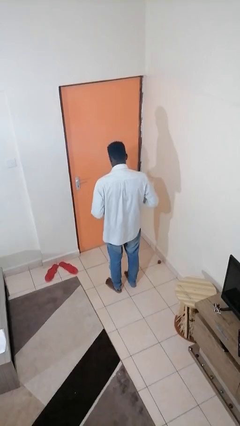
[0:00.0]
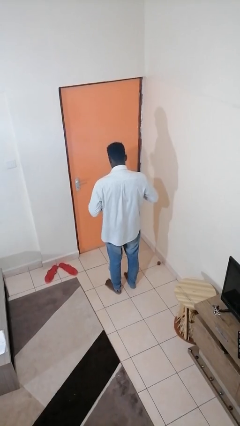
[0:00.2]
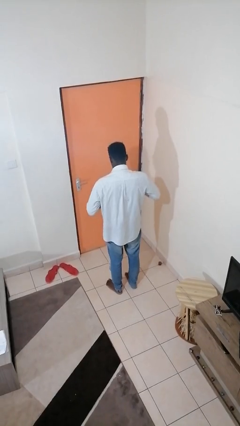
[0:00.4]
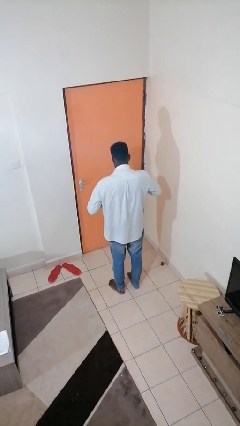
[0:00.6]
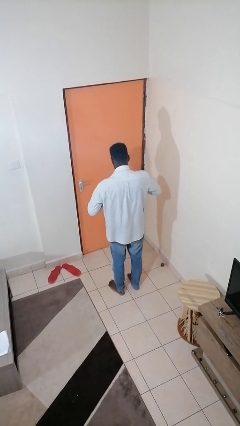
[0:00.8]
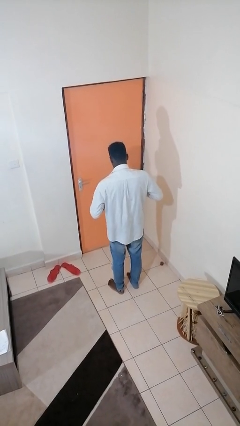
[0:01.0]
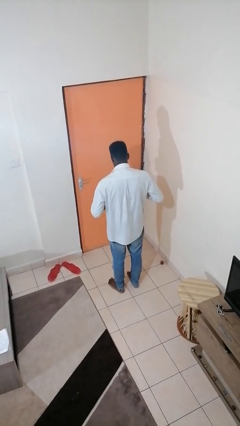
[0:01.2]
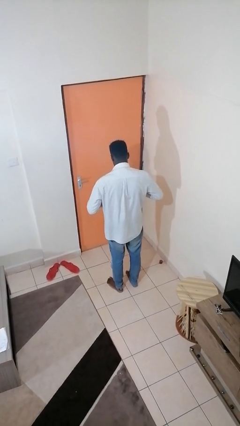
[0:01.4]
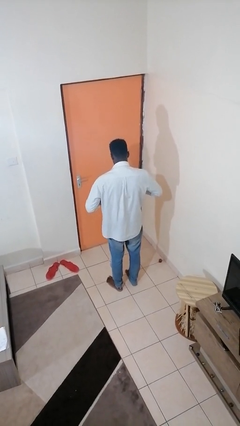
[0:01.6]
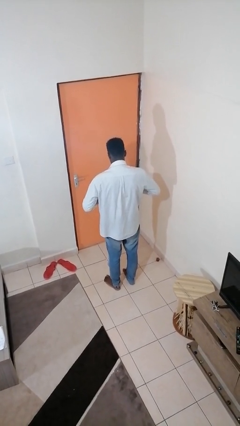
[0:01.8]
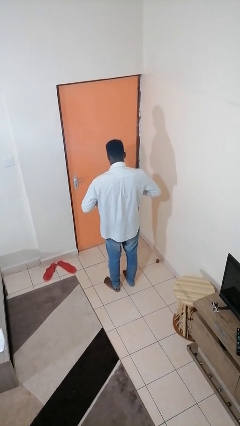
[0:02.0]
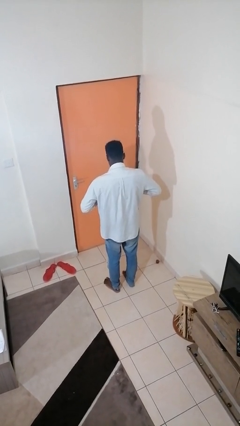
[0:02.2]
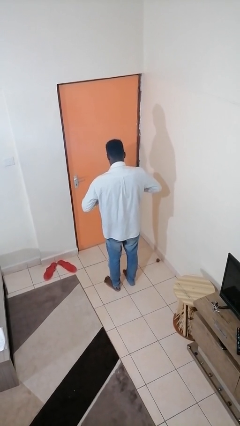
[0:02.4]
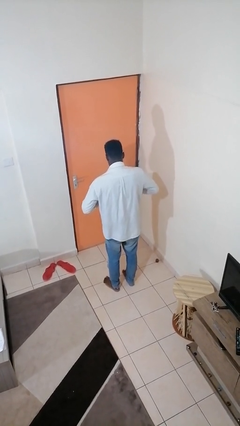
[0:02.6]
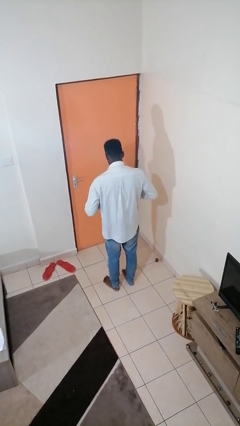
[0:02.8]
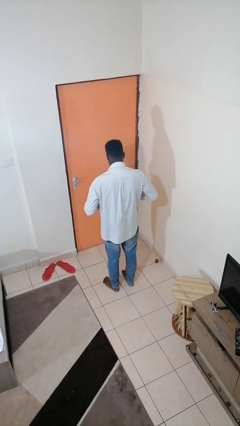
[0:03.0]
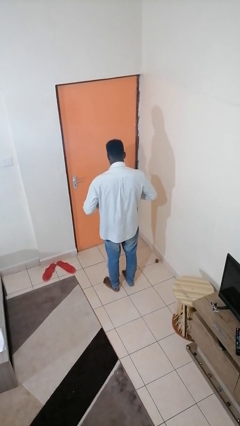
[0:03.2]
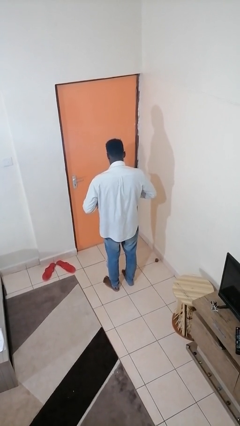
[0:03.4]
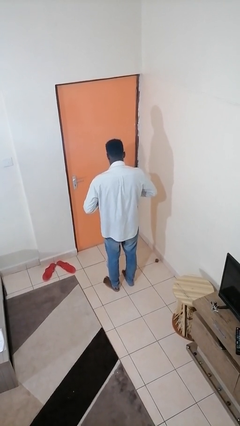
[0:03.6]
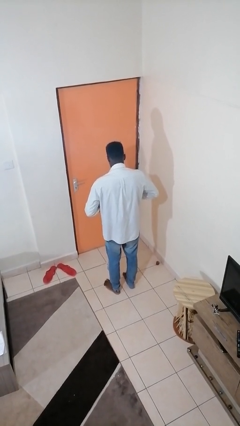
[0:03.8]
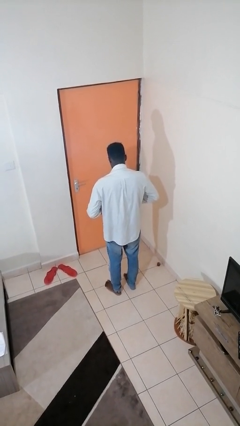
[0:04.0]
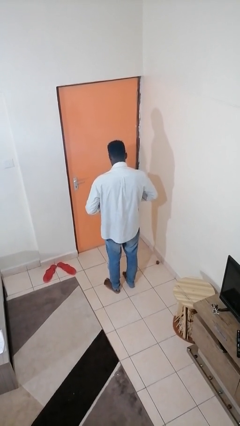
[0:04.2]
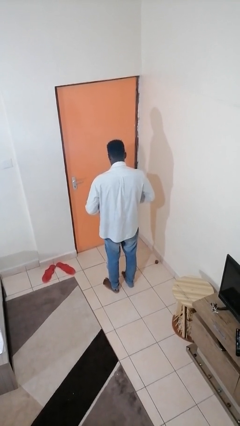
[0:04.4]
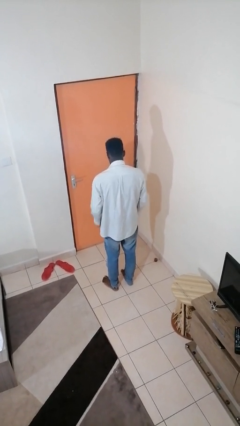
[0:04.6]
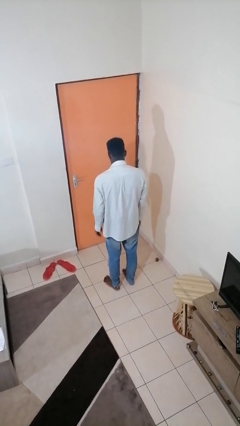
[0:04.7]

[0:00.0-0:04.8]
person unbuttons shirt

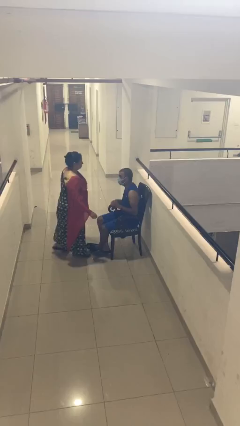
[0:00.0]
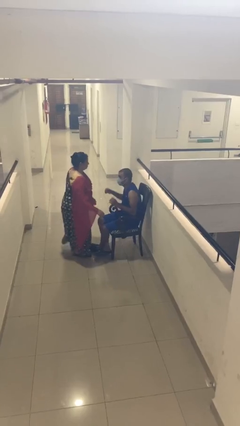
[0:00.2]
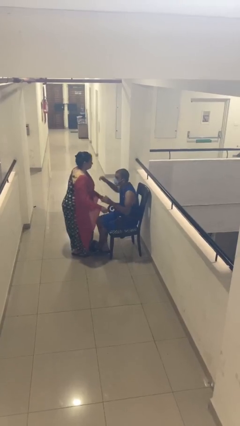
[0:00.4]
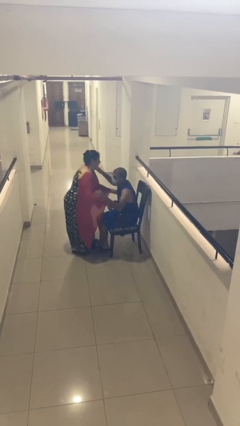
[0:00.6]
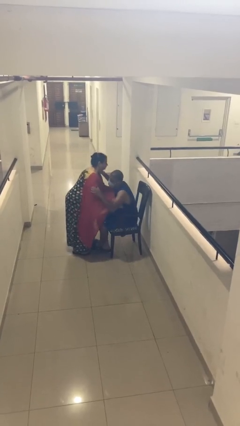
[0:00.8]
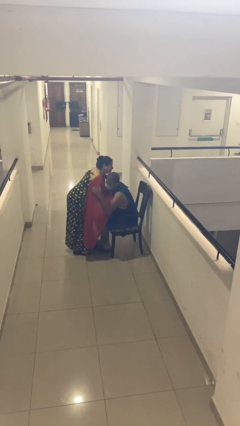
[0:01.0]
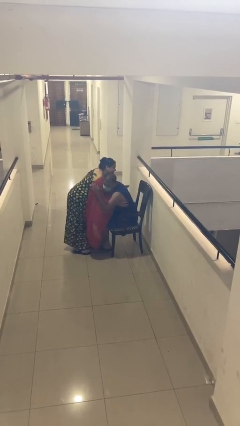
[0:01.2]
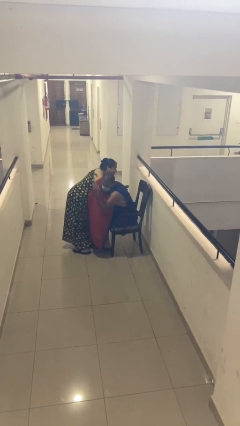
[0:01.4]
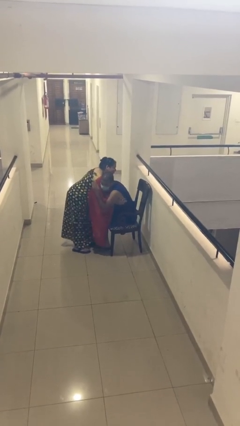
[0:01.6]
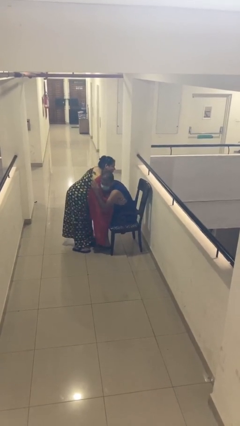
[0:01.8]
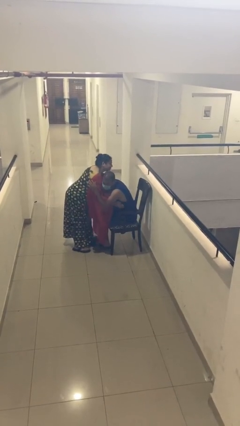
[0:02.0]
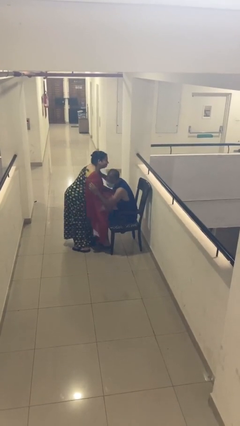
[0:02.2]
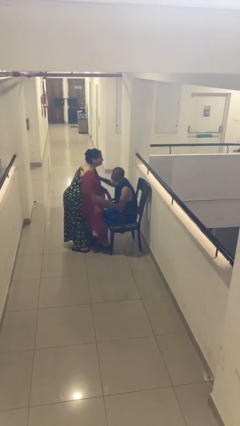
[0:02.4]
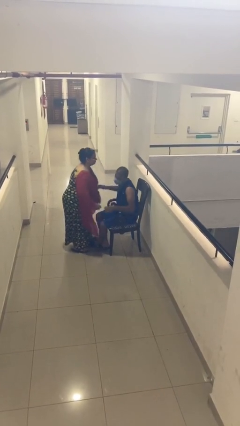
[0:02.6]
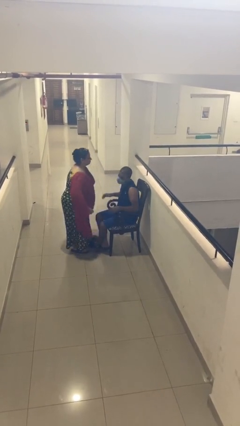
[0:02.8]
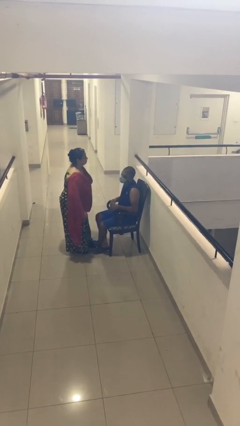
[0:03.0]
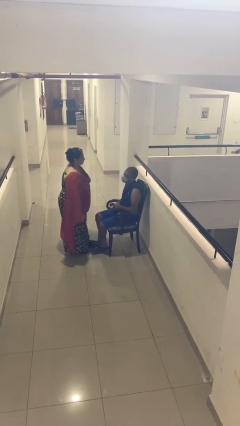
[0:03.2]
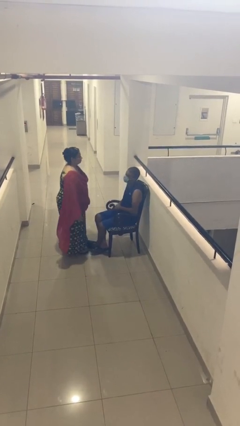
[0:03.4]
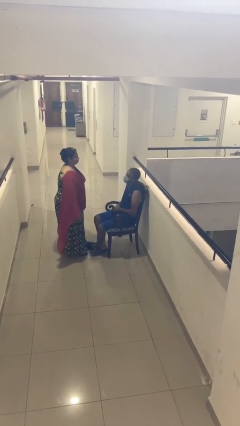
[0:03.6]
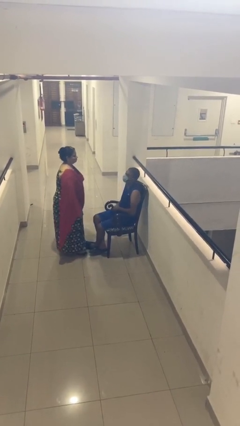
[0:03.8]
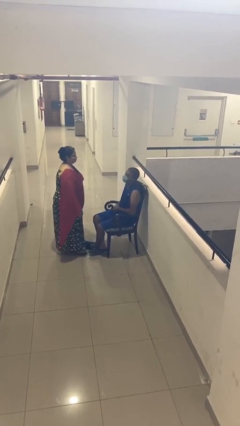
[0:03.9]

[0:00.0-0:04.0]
person embraces person

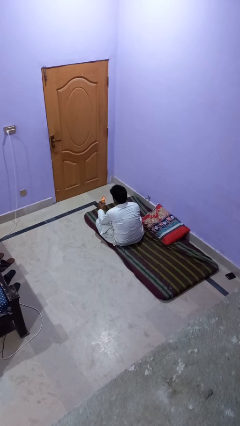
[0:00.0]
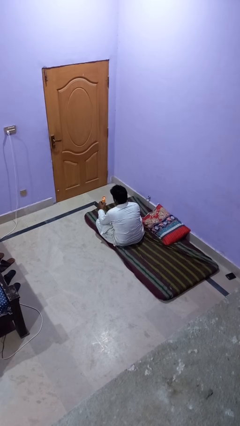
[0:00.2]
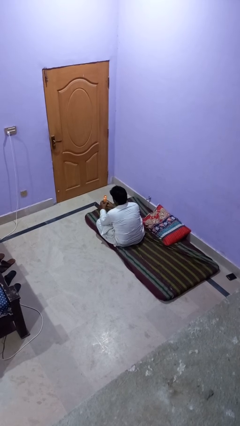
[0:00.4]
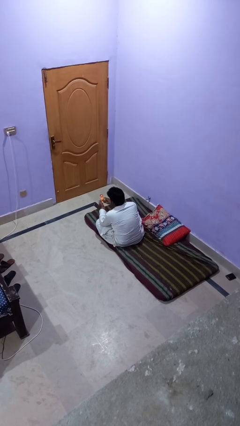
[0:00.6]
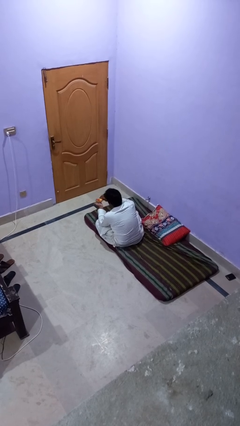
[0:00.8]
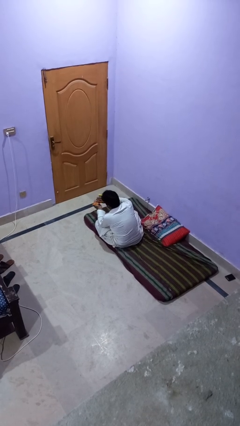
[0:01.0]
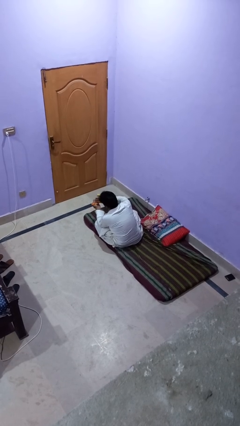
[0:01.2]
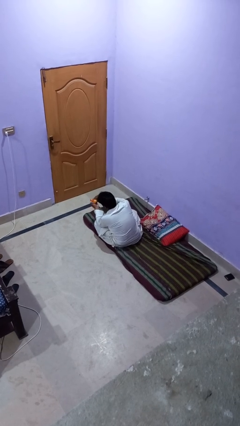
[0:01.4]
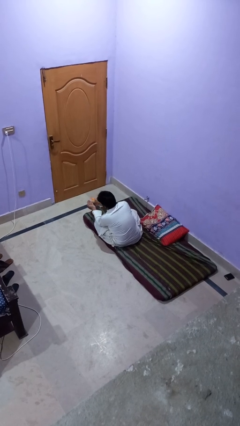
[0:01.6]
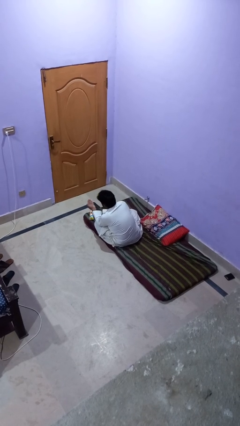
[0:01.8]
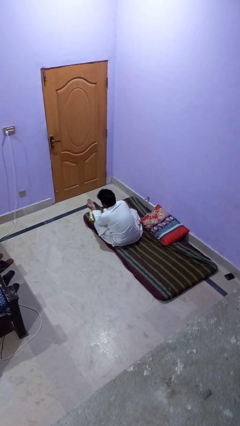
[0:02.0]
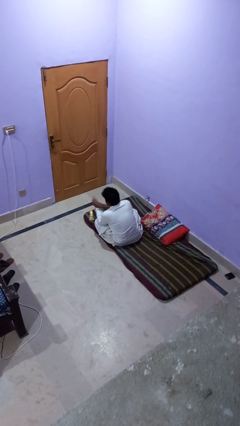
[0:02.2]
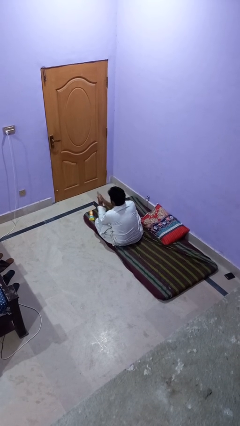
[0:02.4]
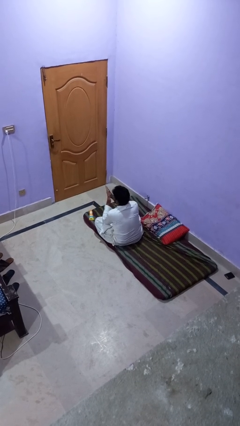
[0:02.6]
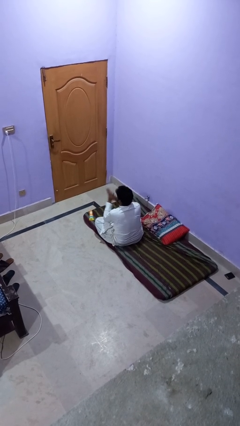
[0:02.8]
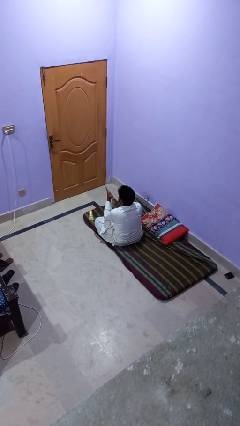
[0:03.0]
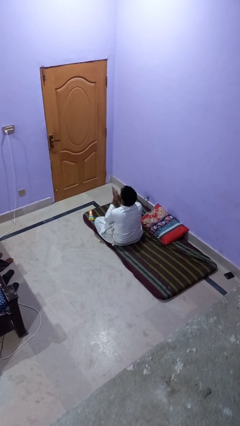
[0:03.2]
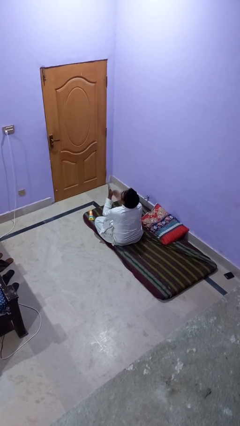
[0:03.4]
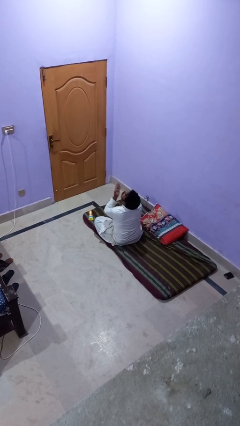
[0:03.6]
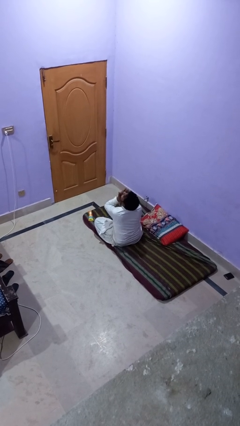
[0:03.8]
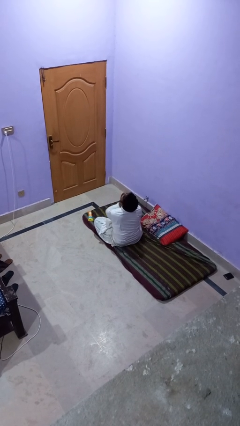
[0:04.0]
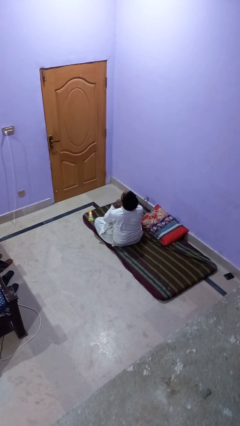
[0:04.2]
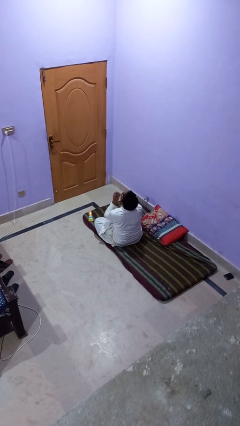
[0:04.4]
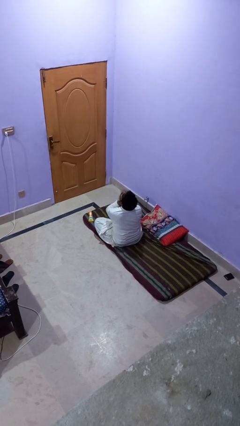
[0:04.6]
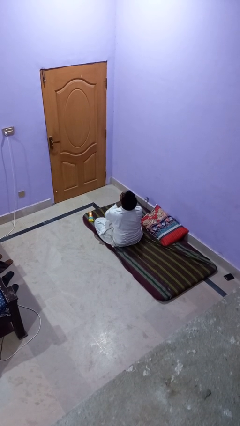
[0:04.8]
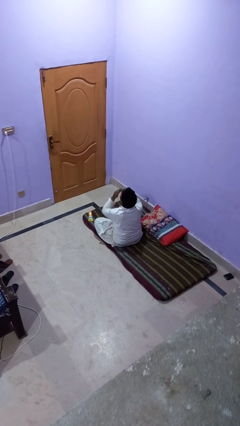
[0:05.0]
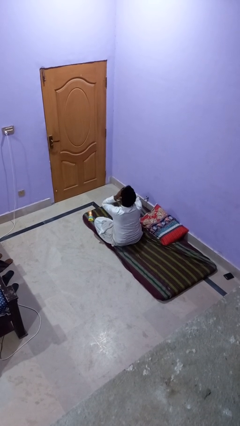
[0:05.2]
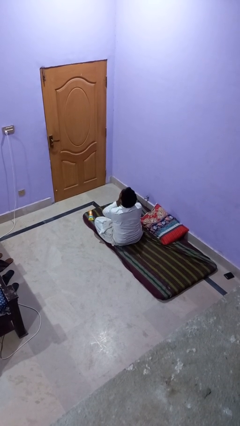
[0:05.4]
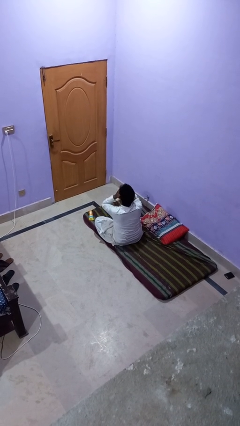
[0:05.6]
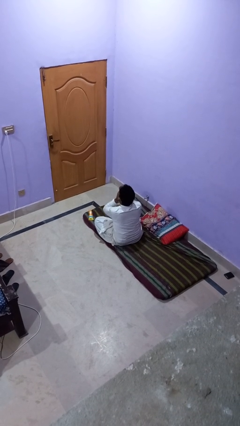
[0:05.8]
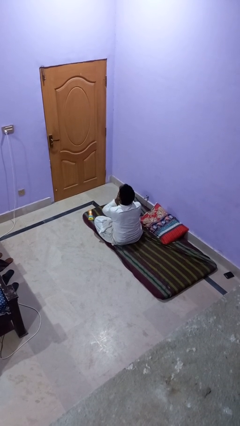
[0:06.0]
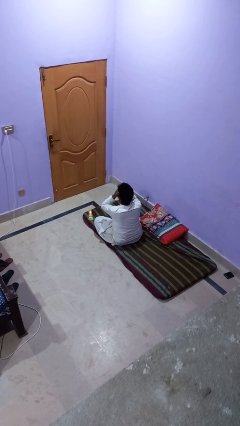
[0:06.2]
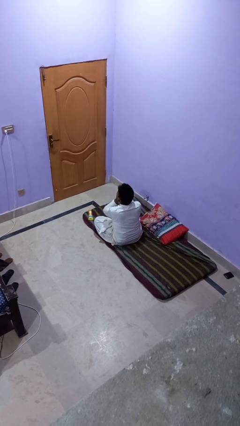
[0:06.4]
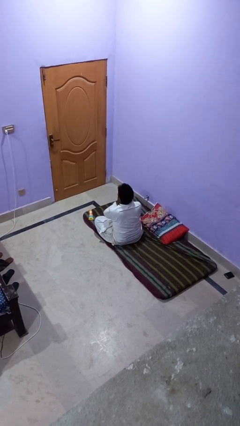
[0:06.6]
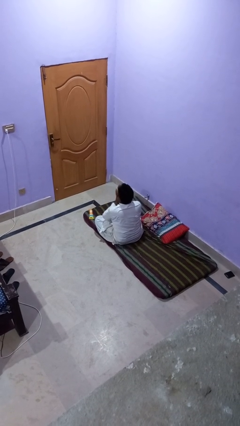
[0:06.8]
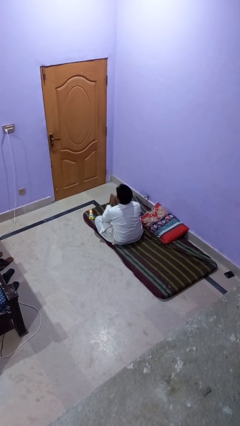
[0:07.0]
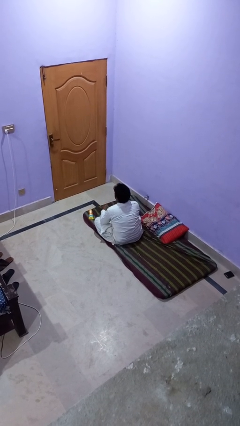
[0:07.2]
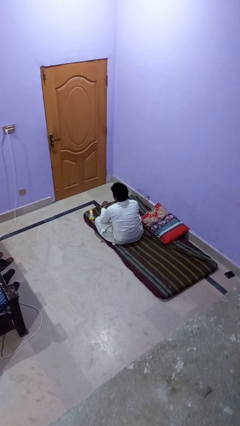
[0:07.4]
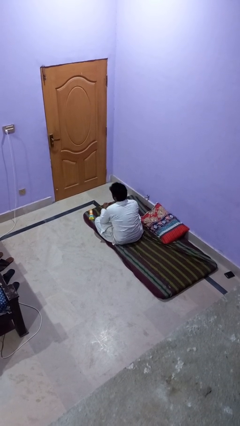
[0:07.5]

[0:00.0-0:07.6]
person applies sunscreen

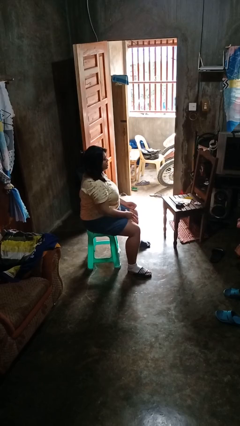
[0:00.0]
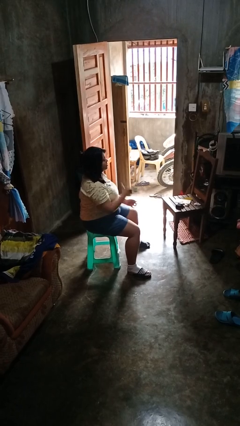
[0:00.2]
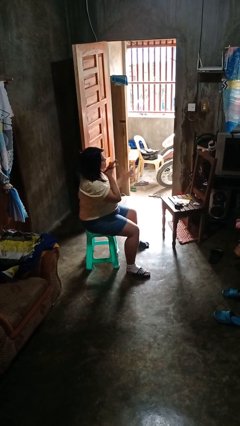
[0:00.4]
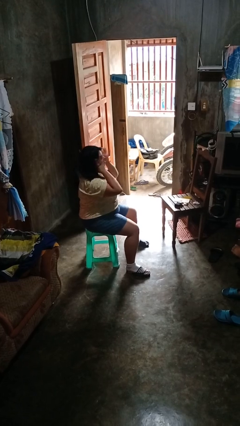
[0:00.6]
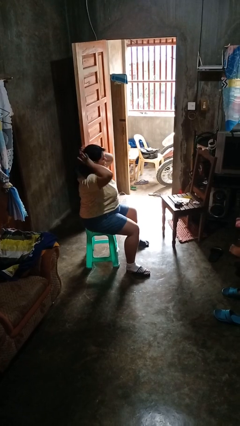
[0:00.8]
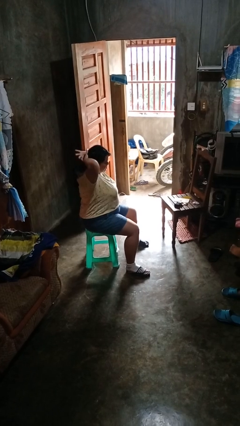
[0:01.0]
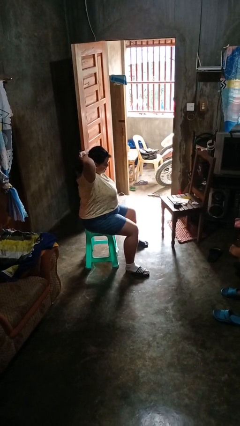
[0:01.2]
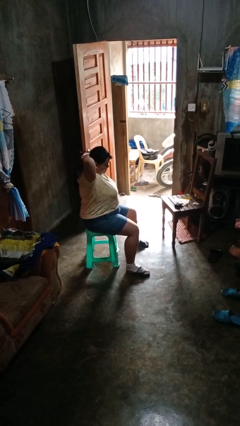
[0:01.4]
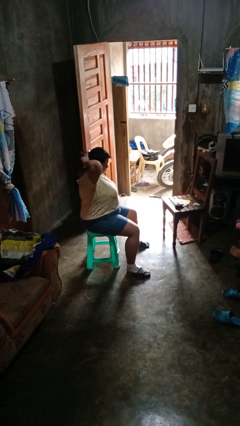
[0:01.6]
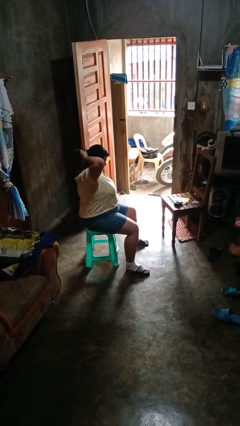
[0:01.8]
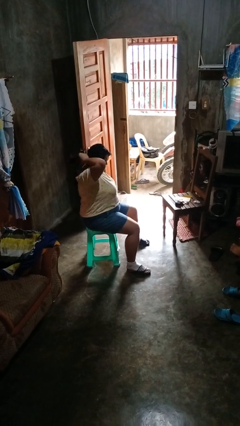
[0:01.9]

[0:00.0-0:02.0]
person puts hair in ponytail
